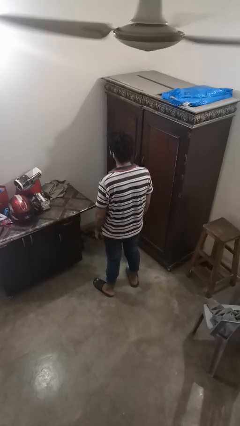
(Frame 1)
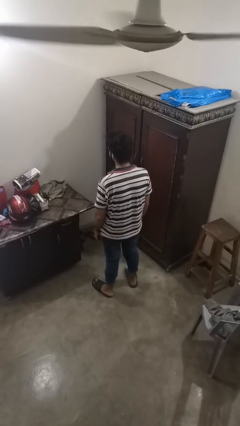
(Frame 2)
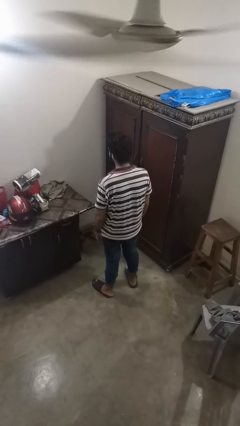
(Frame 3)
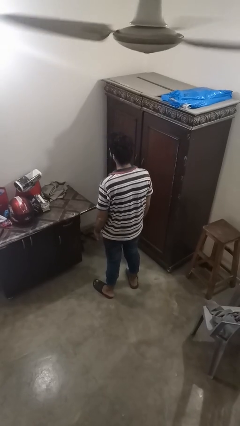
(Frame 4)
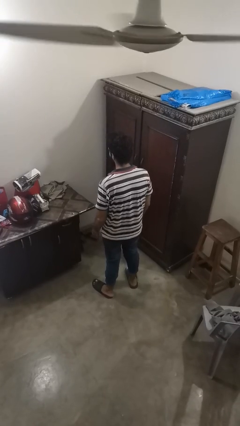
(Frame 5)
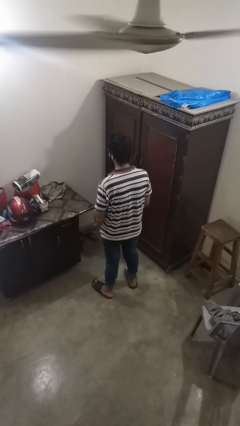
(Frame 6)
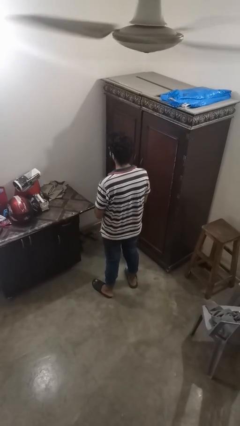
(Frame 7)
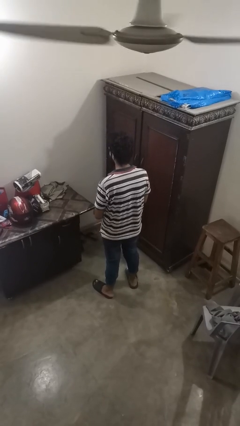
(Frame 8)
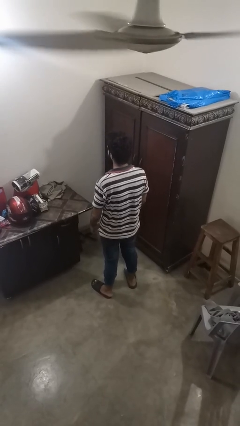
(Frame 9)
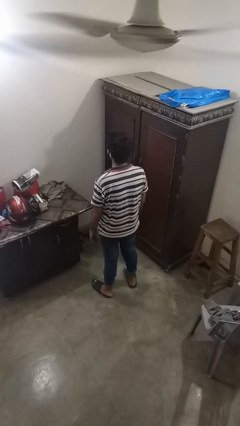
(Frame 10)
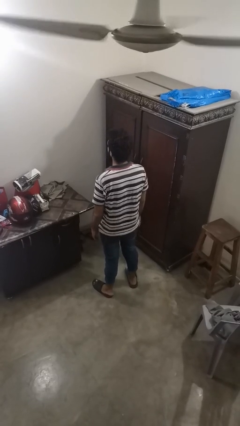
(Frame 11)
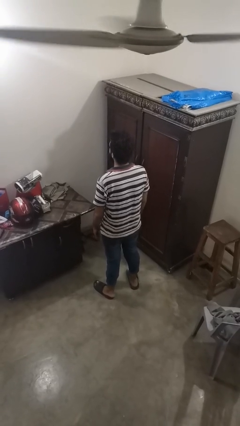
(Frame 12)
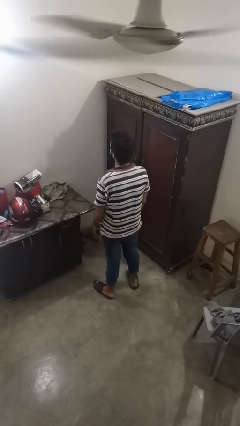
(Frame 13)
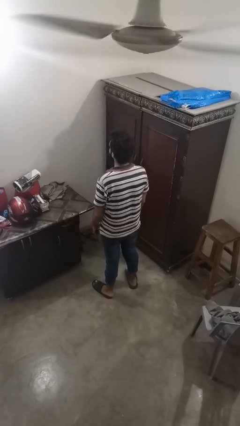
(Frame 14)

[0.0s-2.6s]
person takes off ring

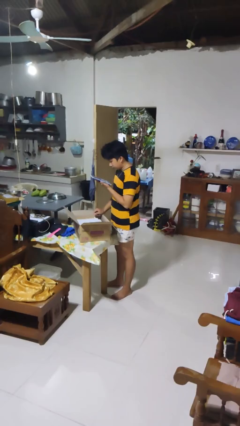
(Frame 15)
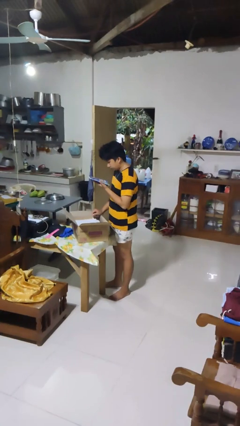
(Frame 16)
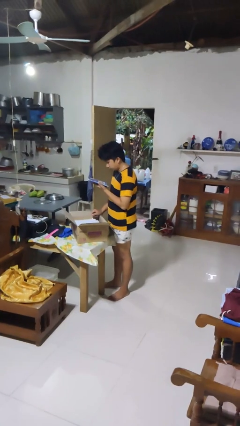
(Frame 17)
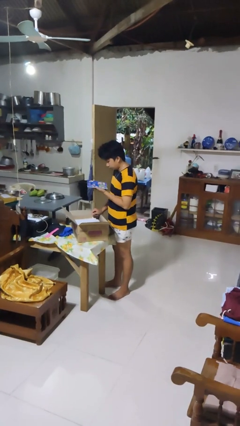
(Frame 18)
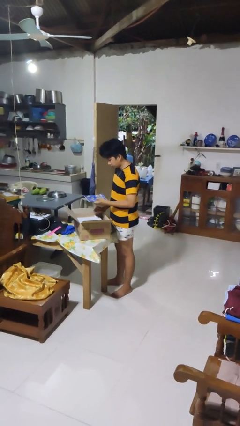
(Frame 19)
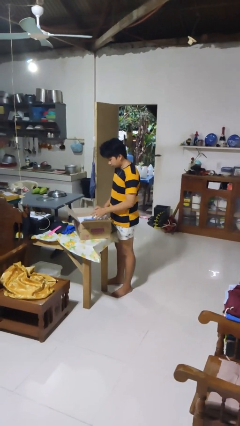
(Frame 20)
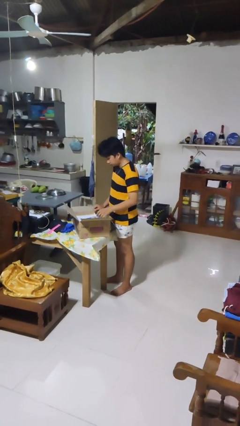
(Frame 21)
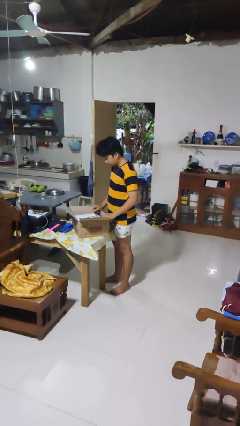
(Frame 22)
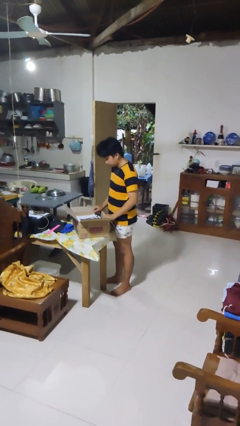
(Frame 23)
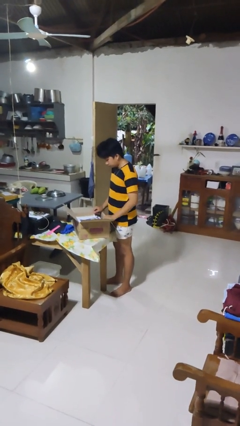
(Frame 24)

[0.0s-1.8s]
person puts object into box

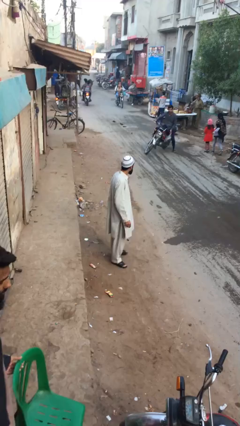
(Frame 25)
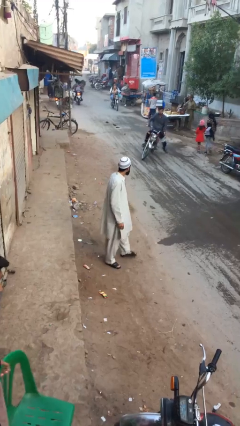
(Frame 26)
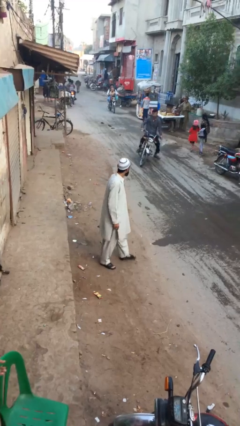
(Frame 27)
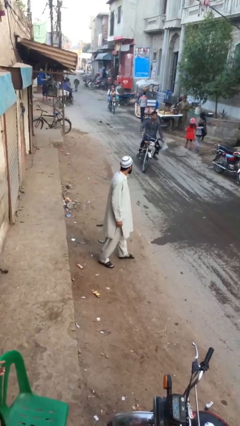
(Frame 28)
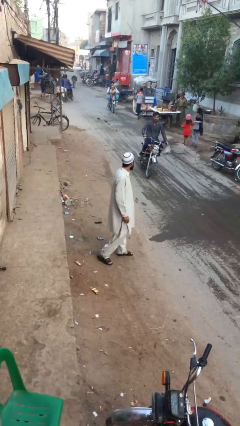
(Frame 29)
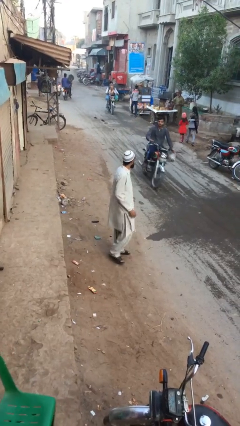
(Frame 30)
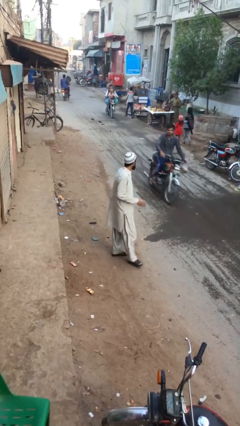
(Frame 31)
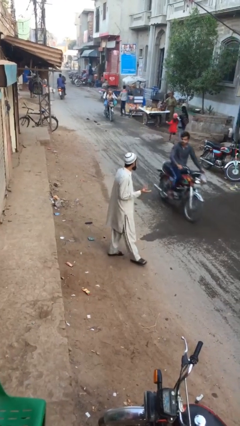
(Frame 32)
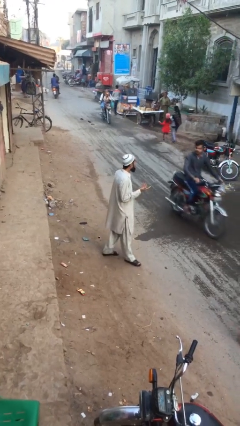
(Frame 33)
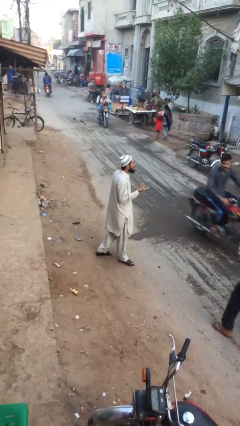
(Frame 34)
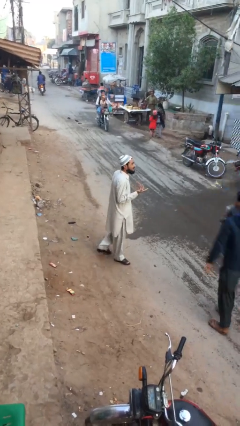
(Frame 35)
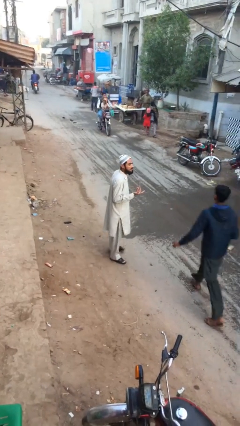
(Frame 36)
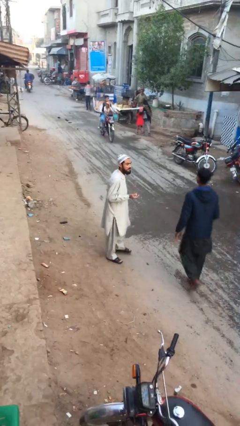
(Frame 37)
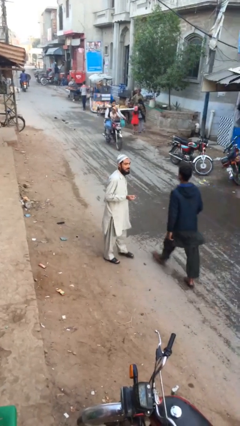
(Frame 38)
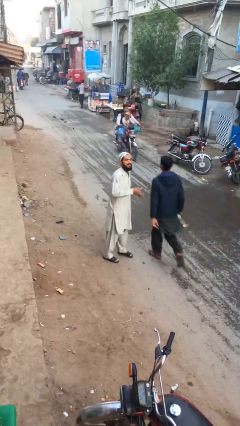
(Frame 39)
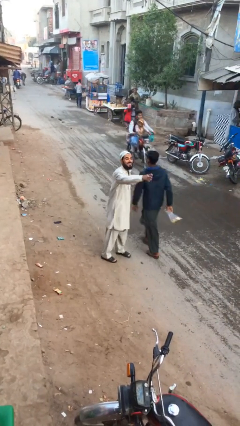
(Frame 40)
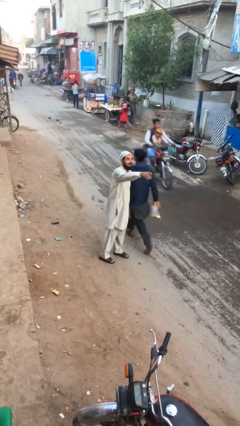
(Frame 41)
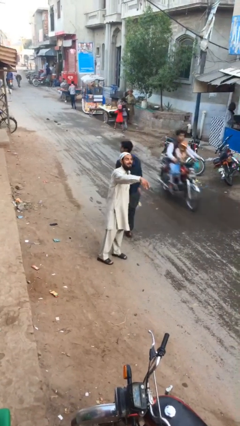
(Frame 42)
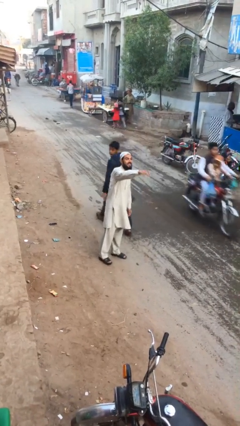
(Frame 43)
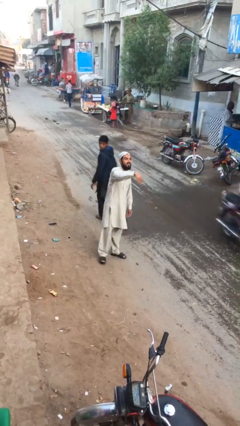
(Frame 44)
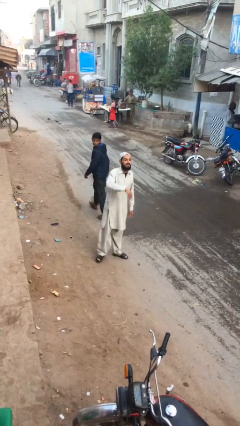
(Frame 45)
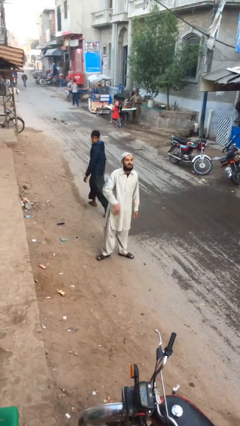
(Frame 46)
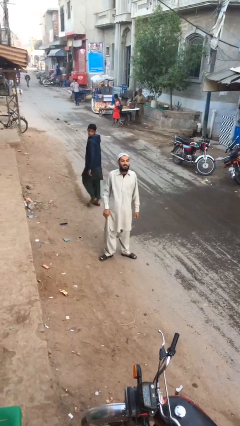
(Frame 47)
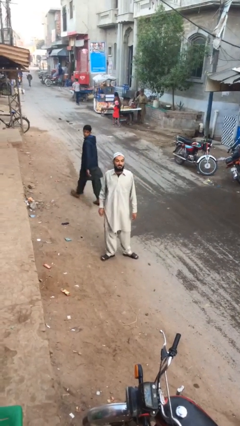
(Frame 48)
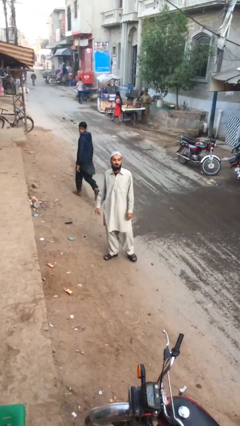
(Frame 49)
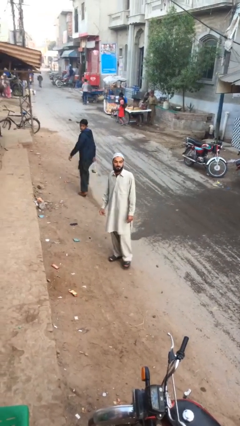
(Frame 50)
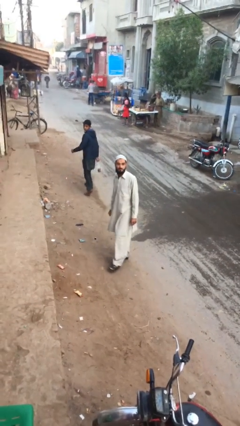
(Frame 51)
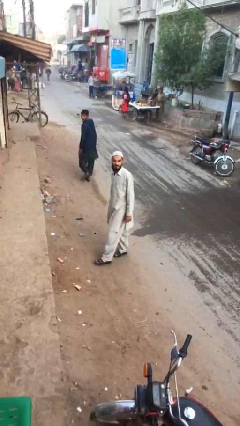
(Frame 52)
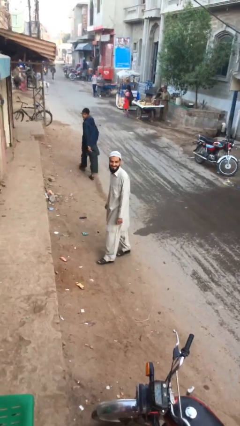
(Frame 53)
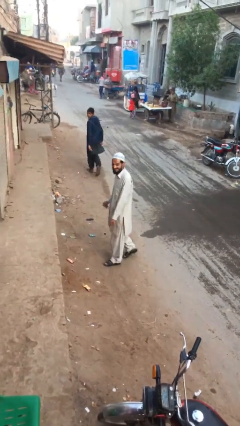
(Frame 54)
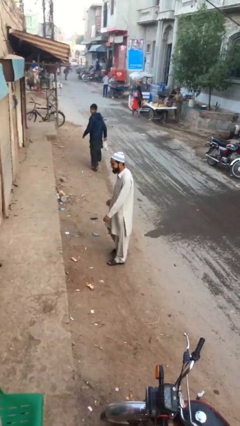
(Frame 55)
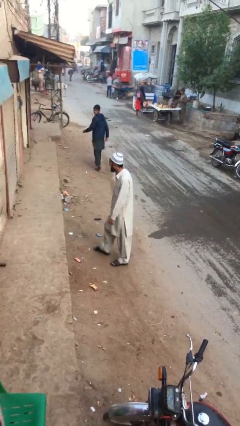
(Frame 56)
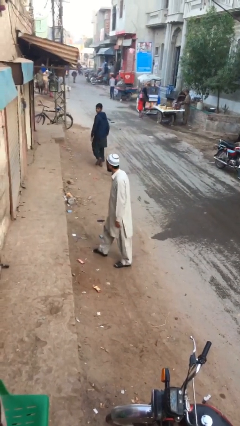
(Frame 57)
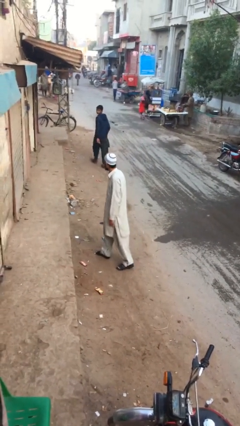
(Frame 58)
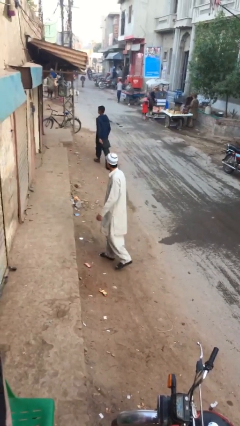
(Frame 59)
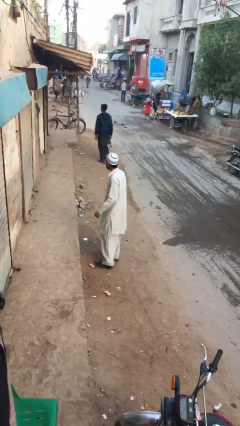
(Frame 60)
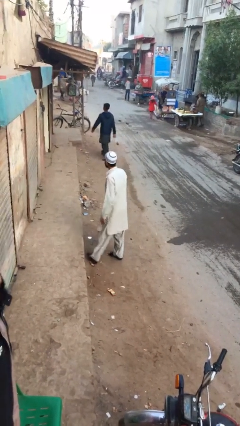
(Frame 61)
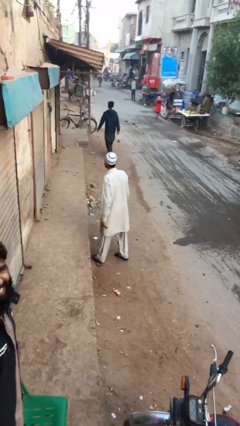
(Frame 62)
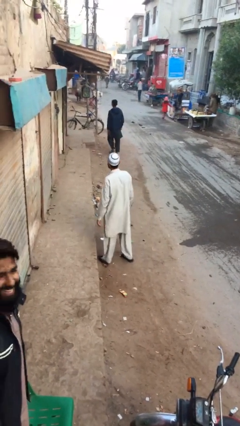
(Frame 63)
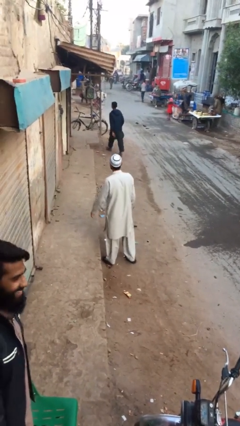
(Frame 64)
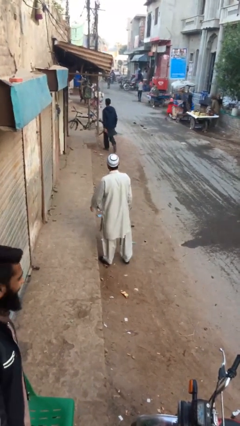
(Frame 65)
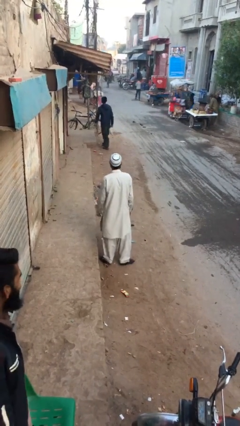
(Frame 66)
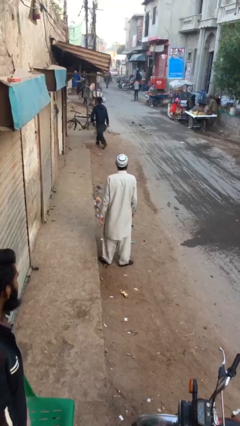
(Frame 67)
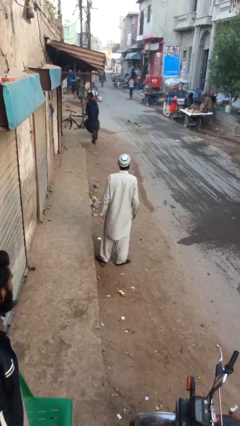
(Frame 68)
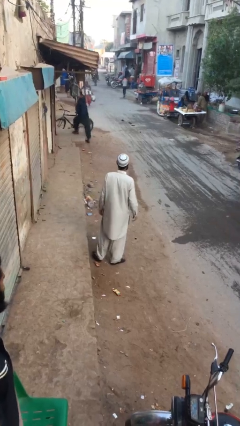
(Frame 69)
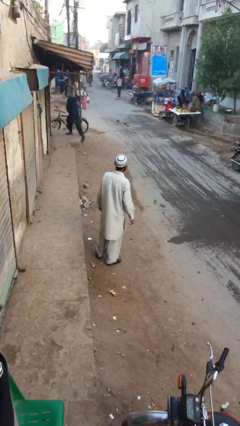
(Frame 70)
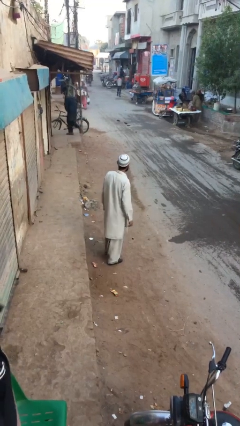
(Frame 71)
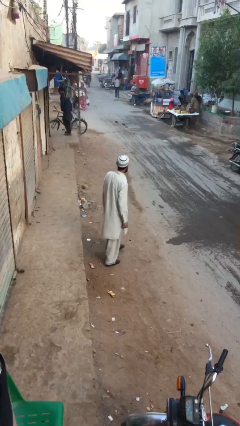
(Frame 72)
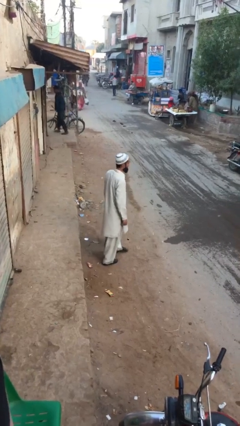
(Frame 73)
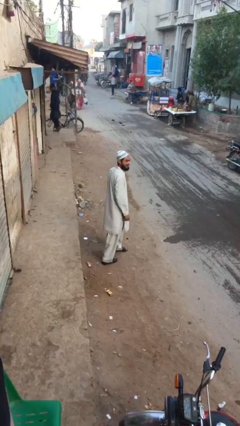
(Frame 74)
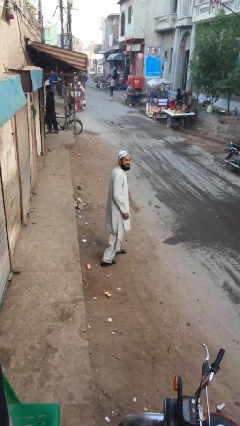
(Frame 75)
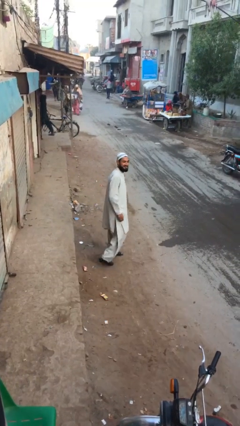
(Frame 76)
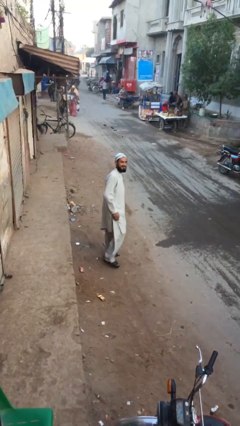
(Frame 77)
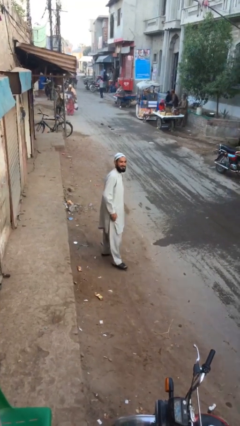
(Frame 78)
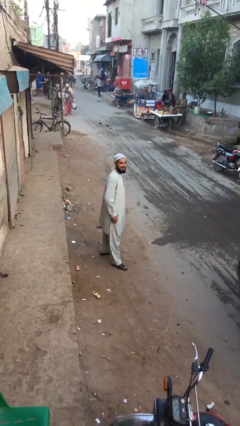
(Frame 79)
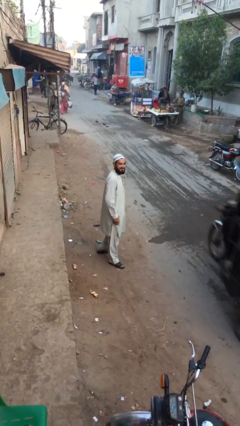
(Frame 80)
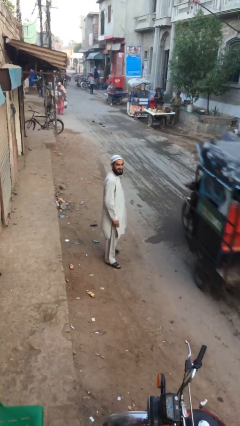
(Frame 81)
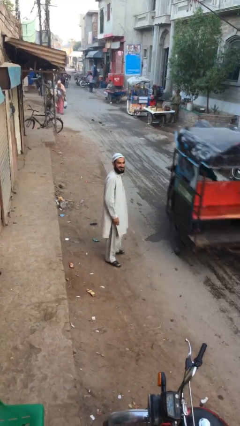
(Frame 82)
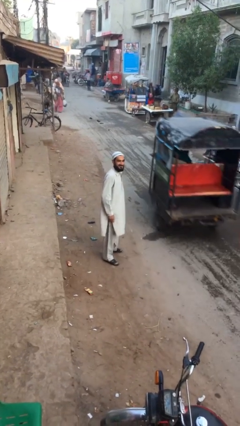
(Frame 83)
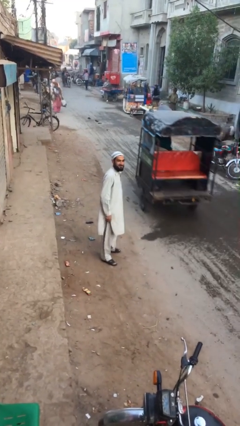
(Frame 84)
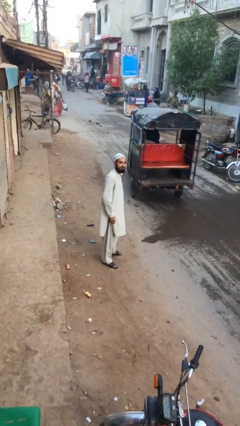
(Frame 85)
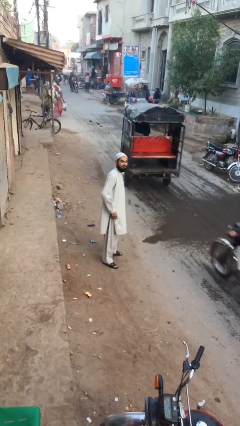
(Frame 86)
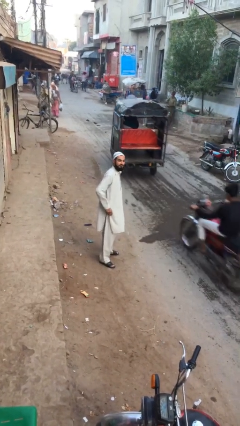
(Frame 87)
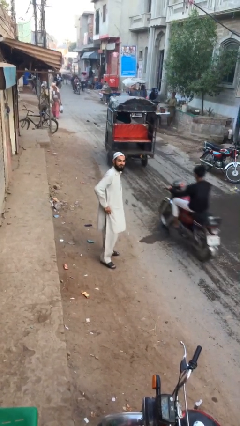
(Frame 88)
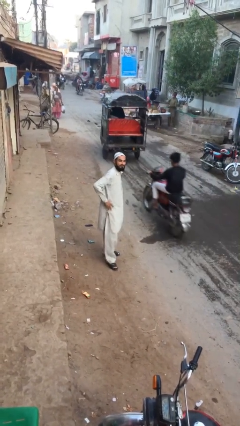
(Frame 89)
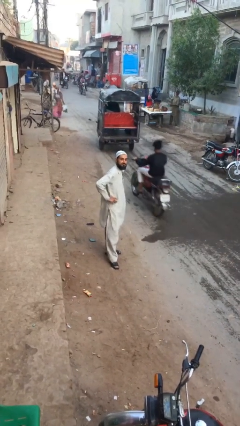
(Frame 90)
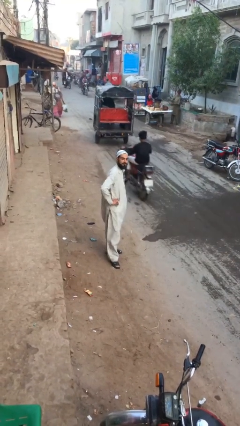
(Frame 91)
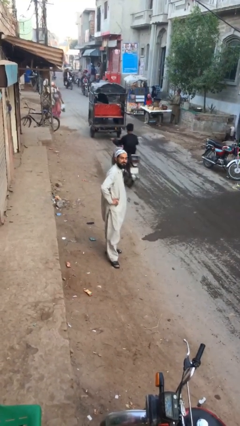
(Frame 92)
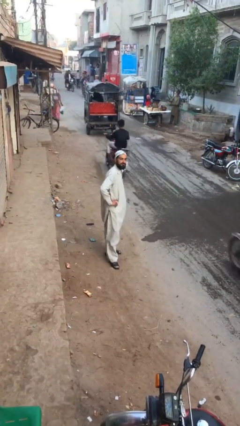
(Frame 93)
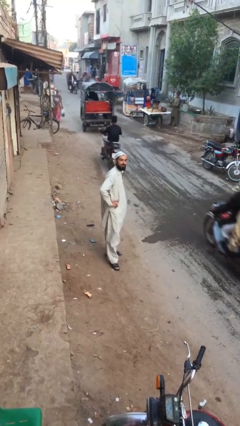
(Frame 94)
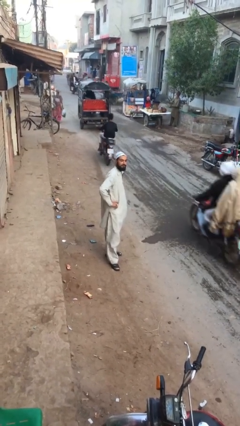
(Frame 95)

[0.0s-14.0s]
person walks
